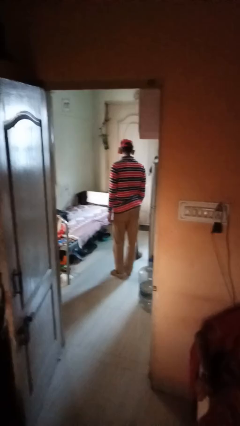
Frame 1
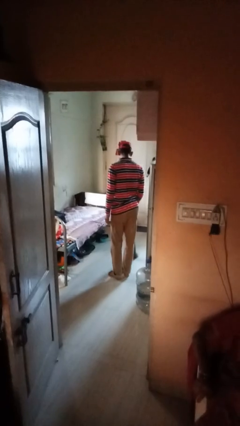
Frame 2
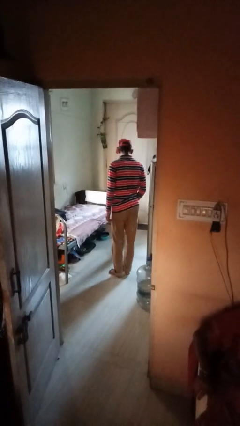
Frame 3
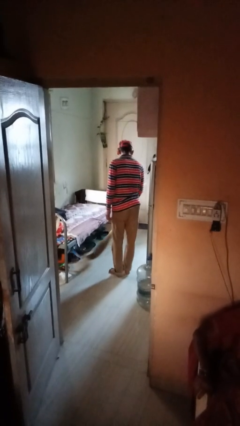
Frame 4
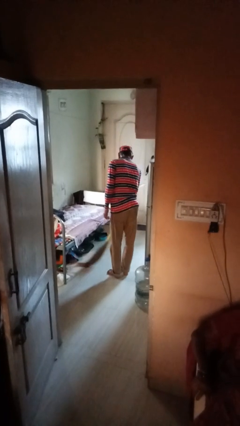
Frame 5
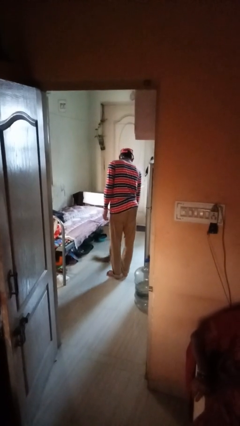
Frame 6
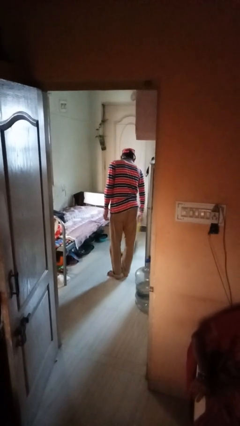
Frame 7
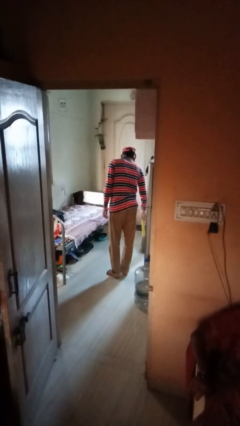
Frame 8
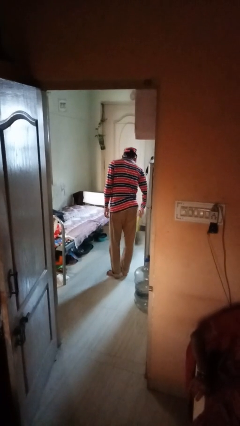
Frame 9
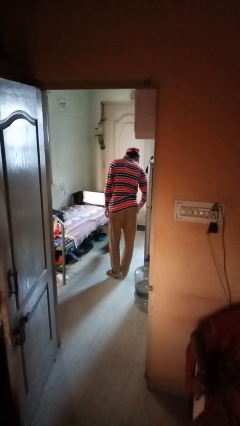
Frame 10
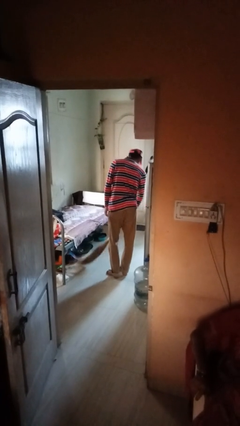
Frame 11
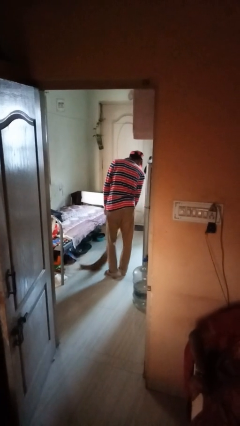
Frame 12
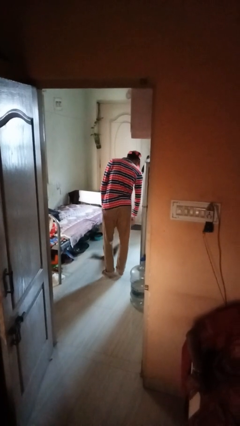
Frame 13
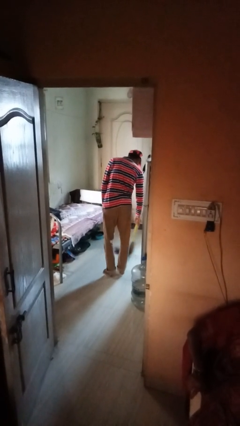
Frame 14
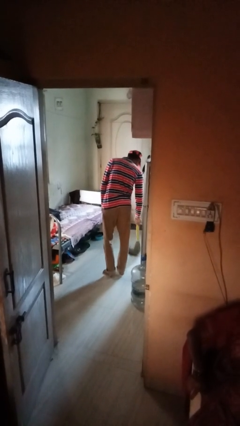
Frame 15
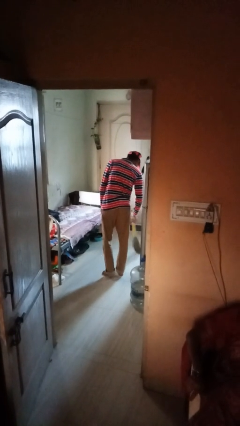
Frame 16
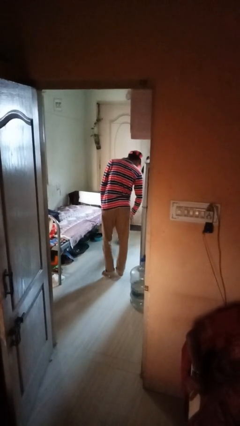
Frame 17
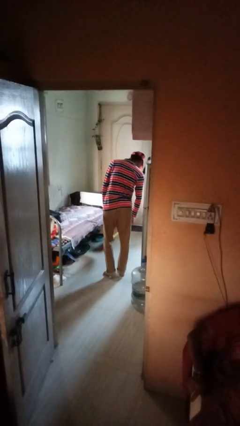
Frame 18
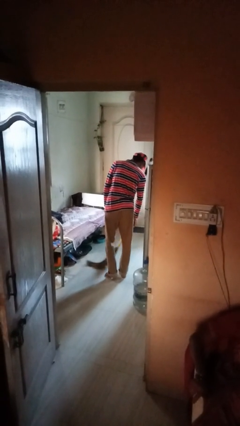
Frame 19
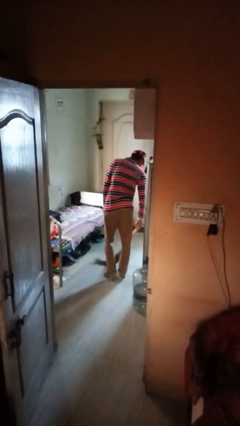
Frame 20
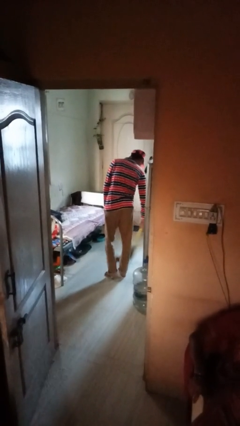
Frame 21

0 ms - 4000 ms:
person sweeps floor

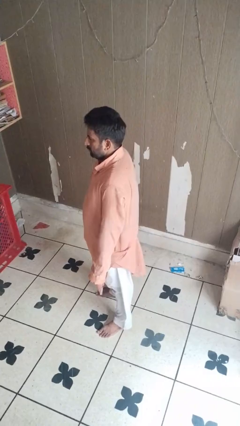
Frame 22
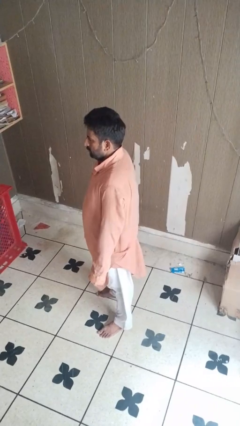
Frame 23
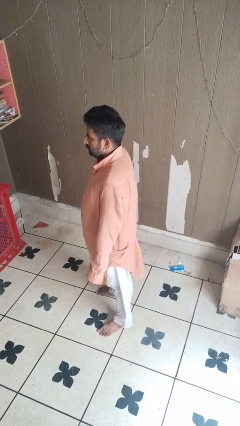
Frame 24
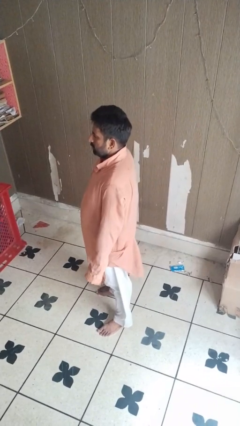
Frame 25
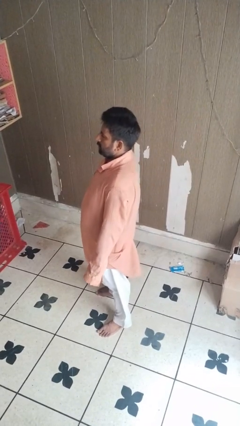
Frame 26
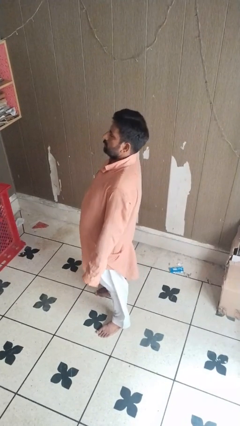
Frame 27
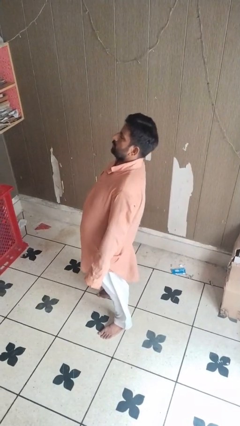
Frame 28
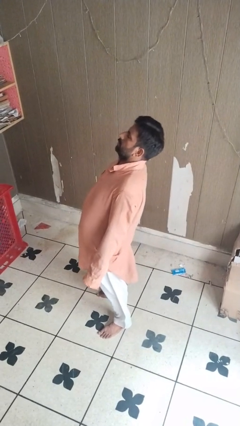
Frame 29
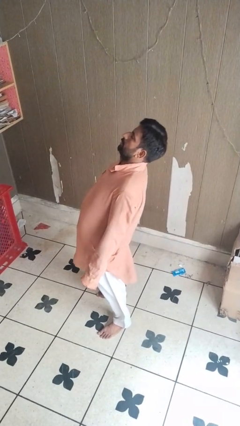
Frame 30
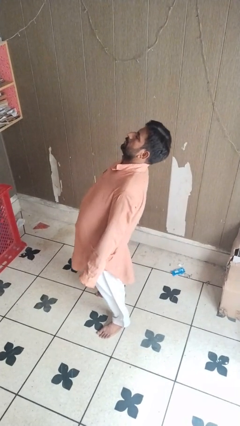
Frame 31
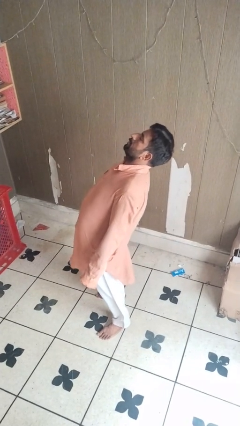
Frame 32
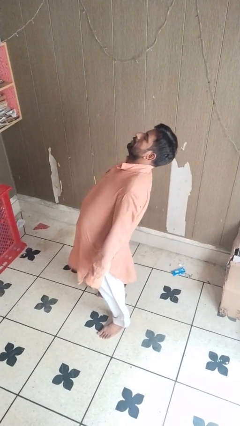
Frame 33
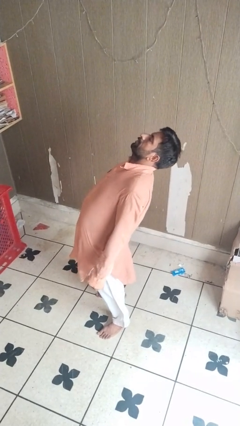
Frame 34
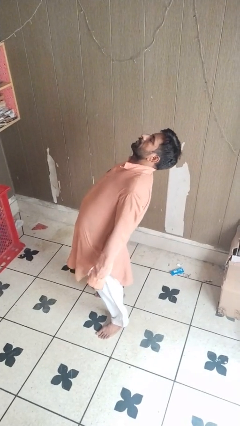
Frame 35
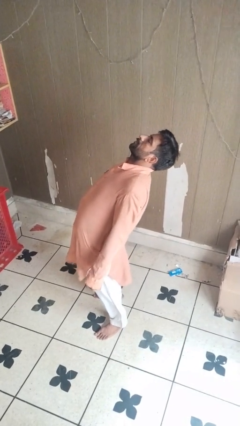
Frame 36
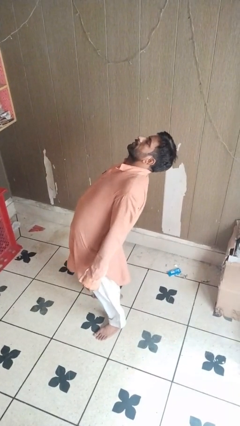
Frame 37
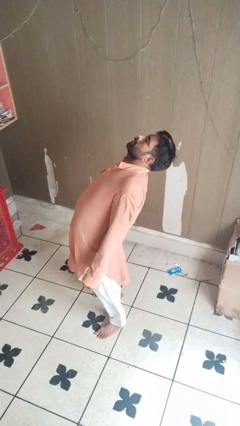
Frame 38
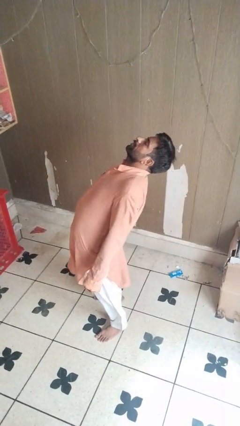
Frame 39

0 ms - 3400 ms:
person stretches back

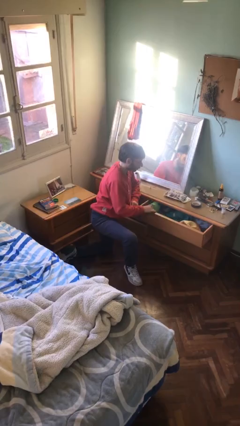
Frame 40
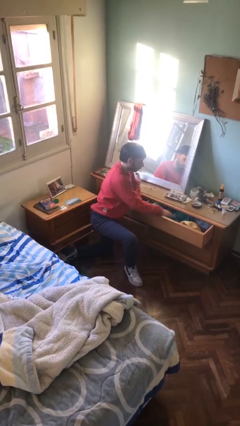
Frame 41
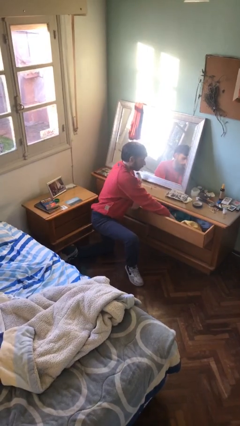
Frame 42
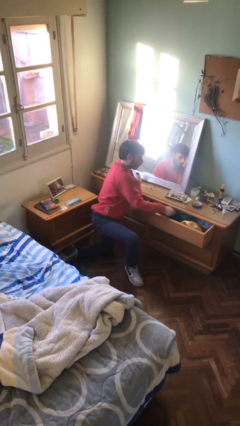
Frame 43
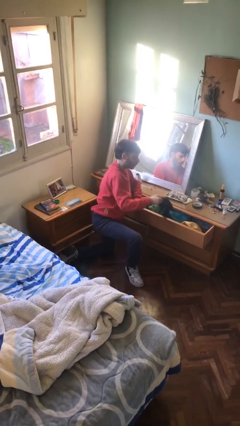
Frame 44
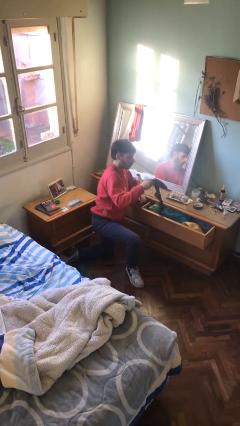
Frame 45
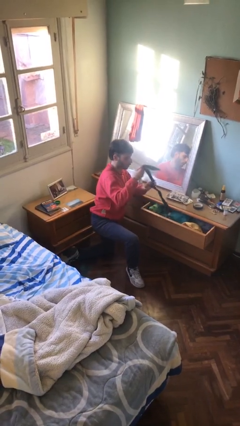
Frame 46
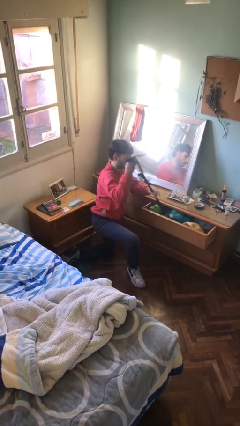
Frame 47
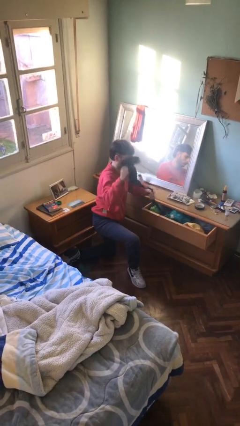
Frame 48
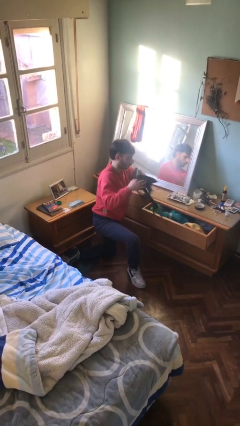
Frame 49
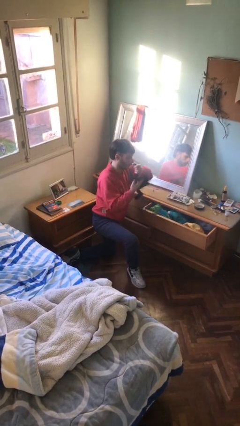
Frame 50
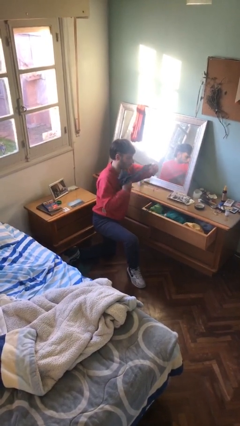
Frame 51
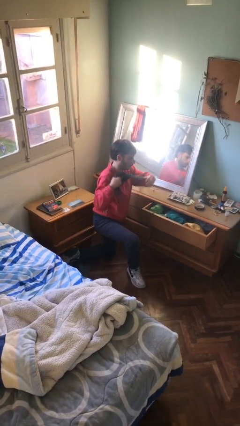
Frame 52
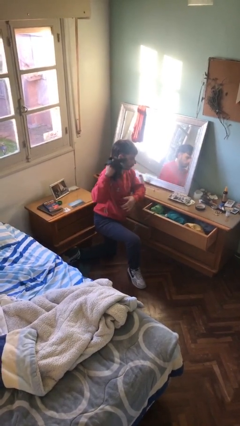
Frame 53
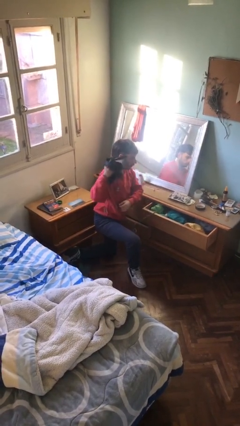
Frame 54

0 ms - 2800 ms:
person takes clothes from dresser

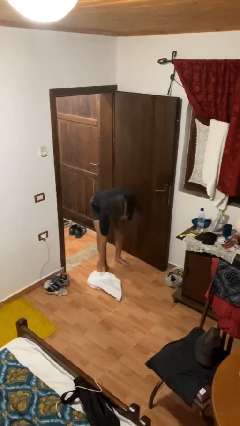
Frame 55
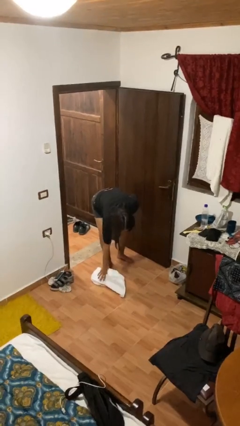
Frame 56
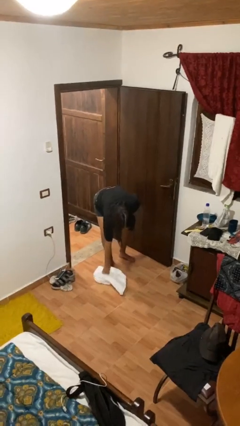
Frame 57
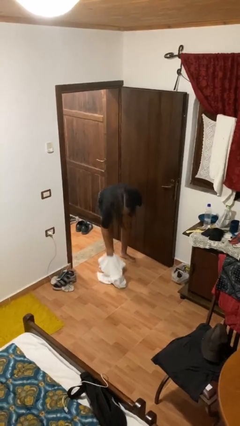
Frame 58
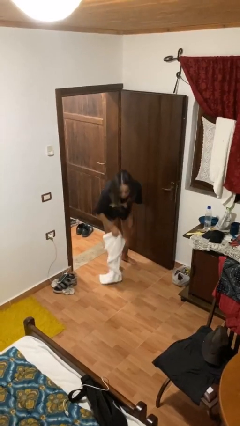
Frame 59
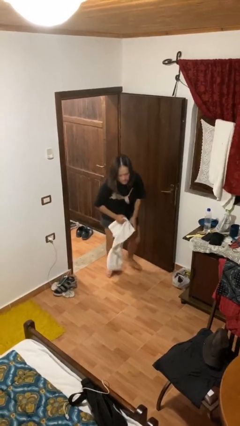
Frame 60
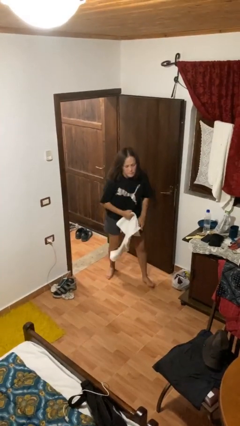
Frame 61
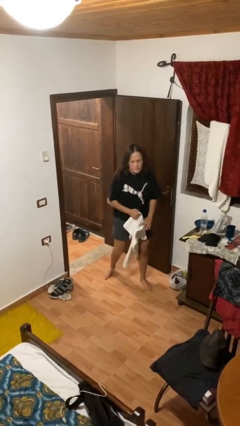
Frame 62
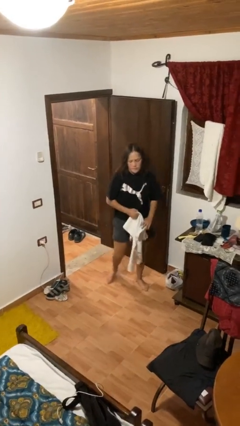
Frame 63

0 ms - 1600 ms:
person picks up object from floor

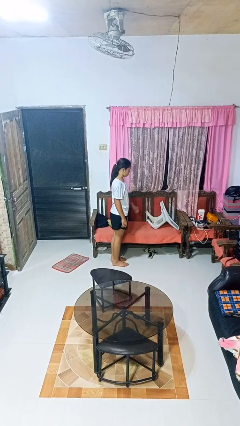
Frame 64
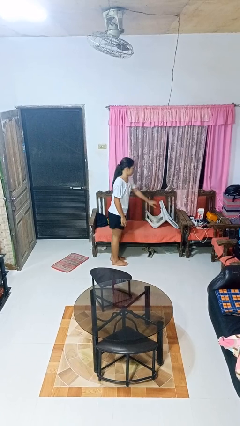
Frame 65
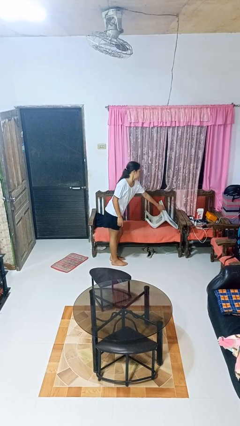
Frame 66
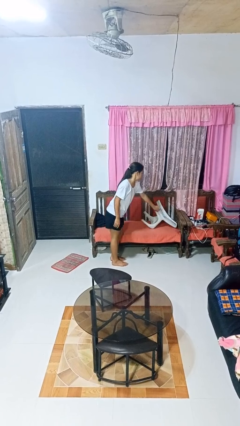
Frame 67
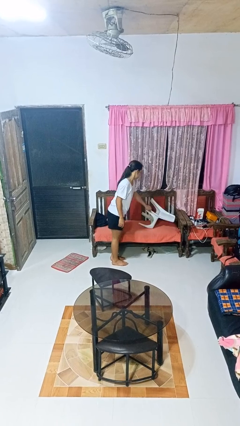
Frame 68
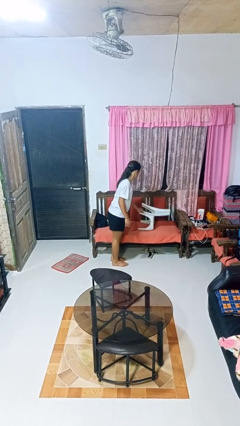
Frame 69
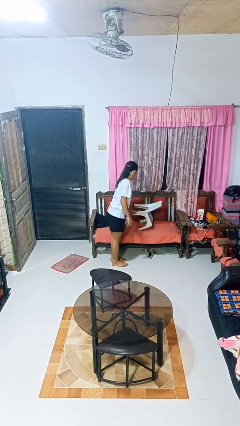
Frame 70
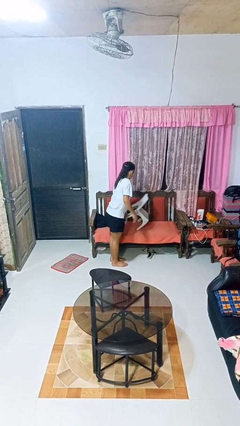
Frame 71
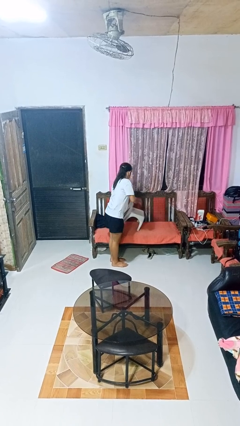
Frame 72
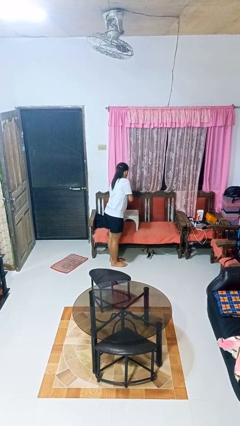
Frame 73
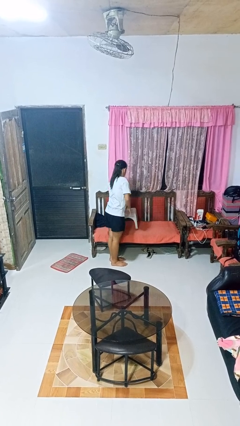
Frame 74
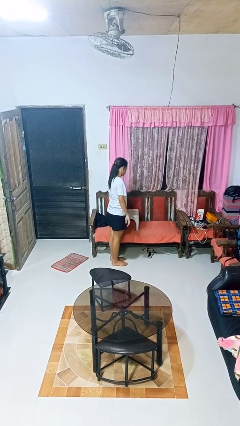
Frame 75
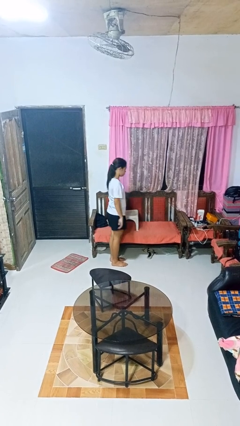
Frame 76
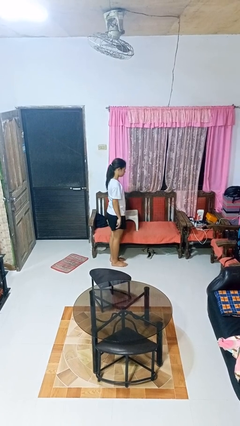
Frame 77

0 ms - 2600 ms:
person sets upright furniture

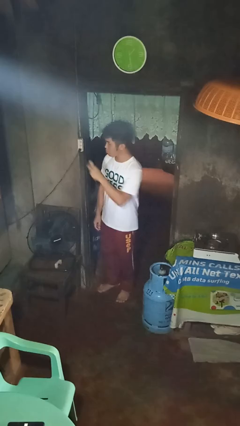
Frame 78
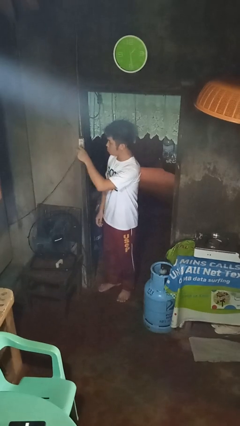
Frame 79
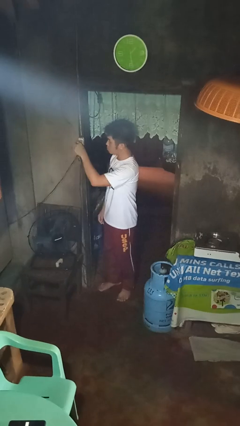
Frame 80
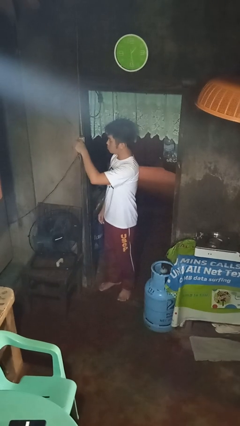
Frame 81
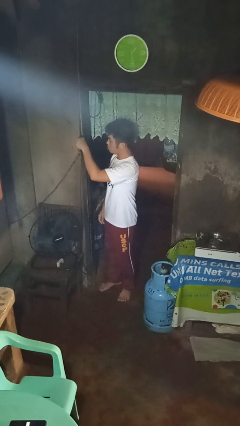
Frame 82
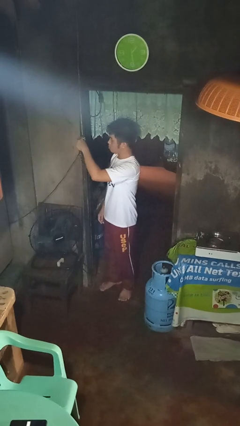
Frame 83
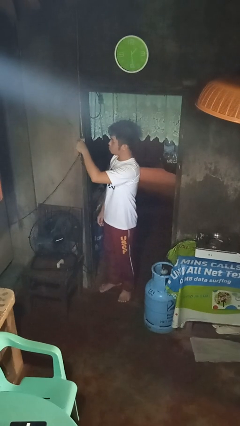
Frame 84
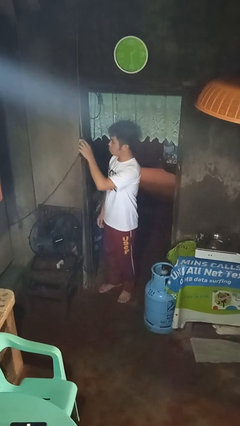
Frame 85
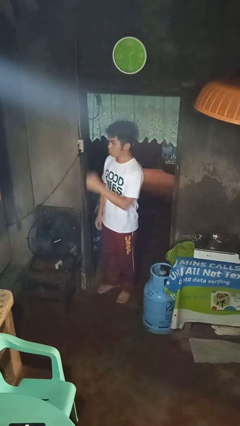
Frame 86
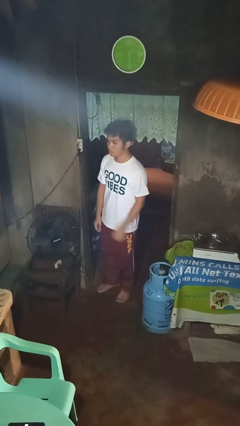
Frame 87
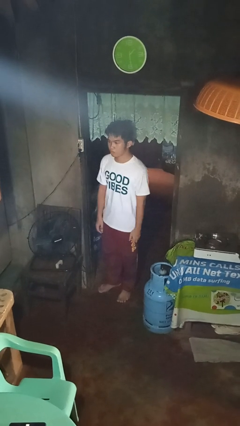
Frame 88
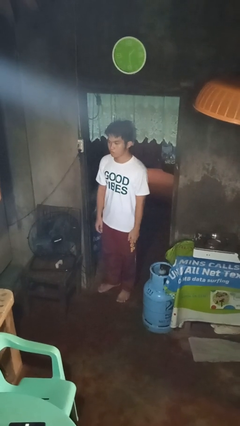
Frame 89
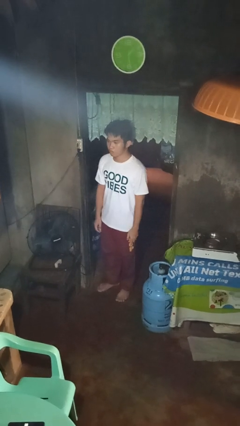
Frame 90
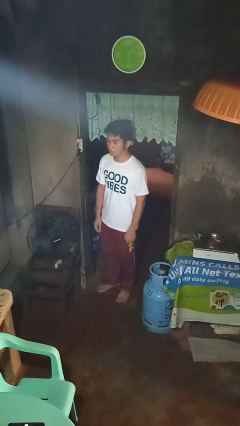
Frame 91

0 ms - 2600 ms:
person plugs into electrical socket

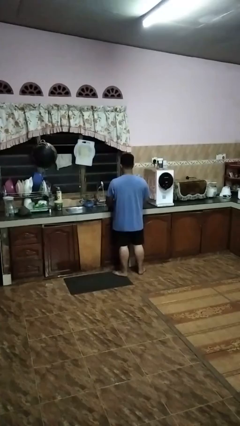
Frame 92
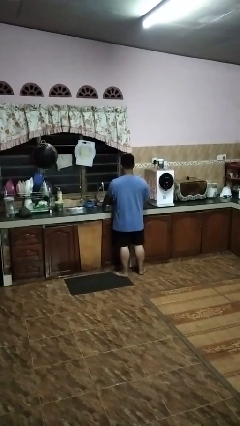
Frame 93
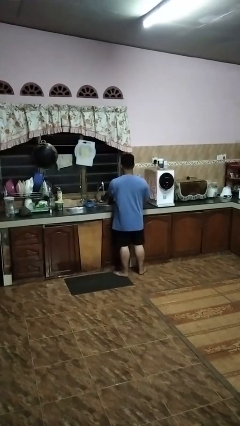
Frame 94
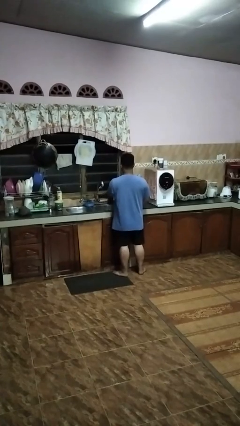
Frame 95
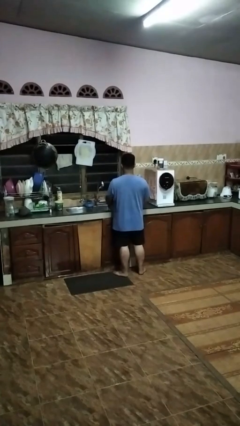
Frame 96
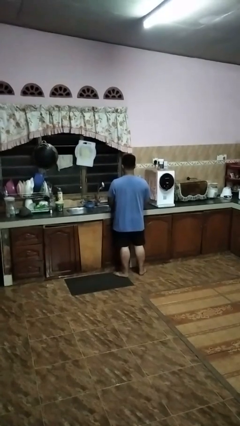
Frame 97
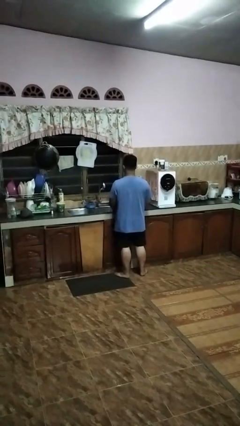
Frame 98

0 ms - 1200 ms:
person turns off faucet
